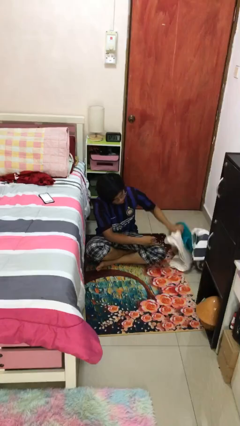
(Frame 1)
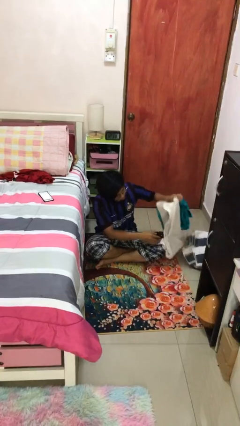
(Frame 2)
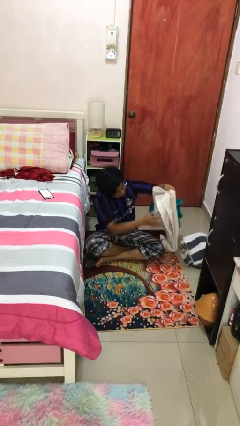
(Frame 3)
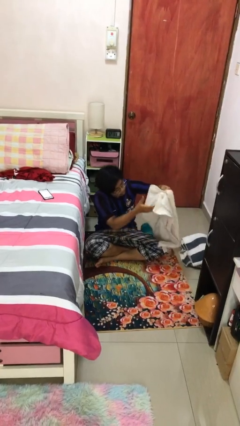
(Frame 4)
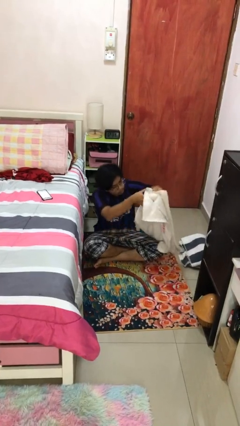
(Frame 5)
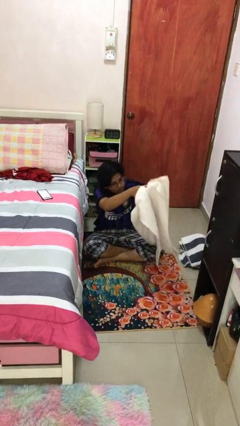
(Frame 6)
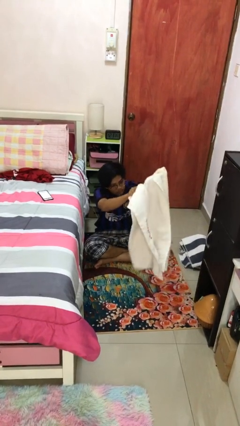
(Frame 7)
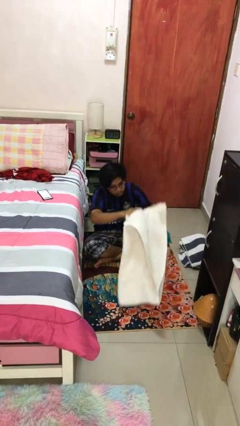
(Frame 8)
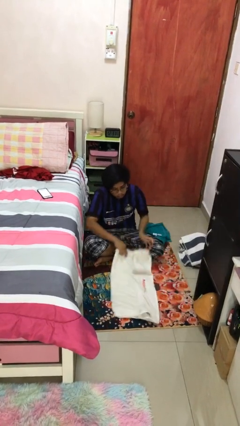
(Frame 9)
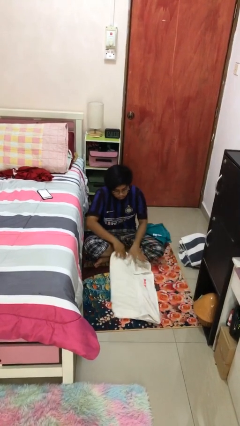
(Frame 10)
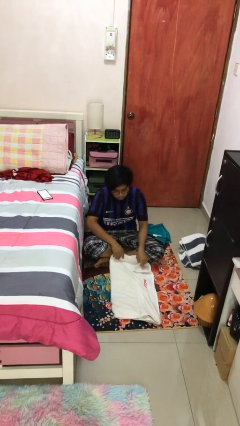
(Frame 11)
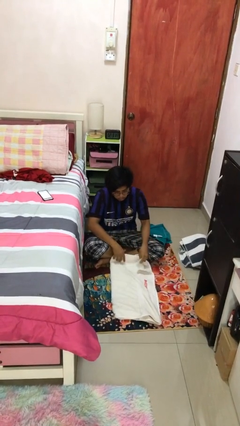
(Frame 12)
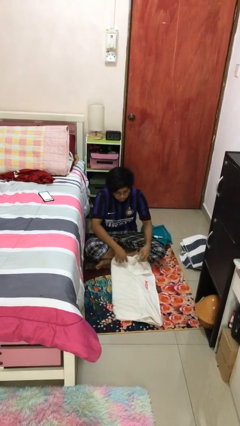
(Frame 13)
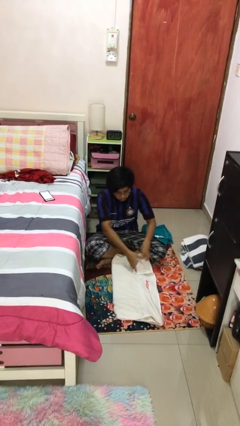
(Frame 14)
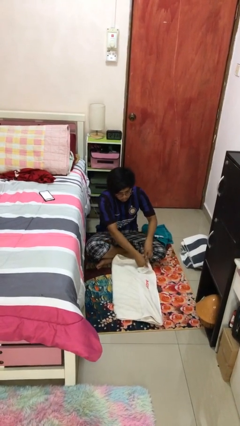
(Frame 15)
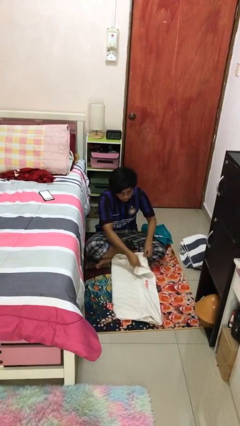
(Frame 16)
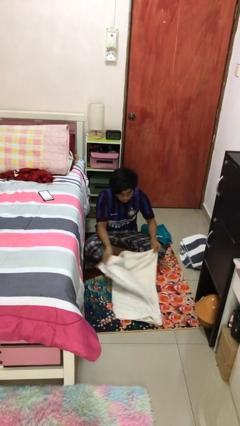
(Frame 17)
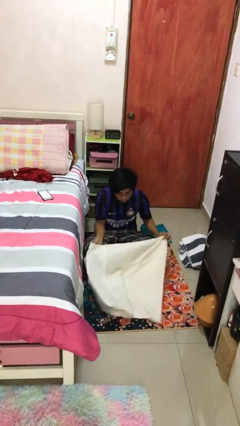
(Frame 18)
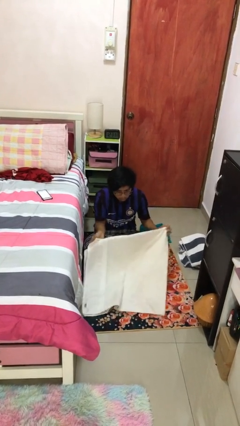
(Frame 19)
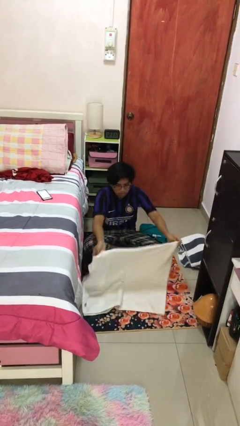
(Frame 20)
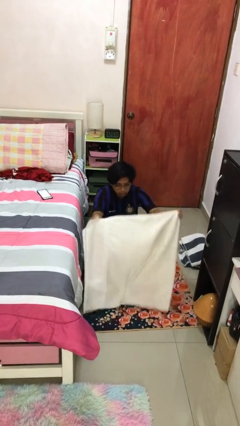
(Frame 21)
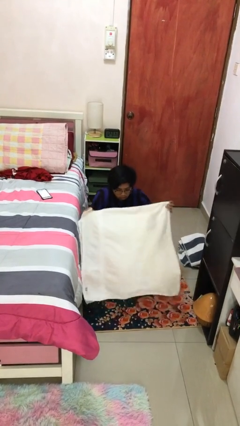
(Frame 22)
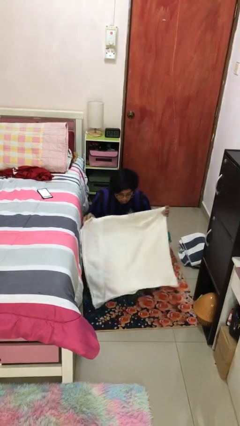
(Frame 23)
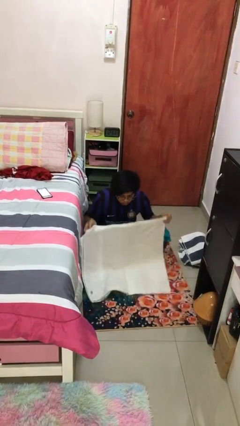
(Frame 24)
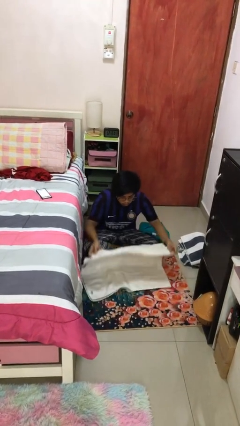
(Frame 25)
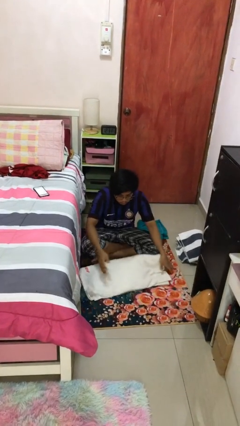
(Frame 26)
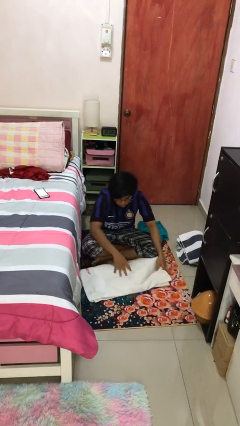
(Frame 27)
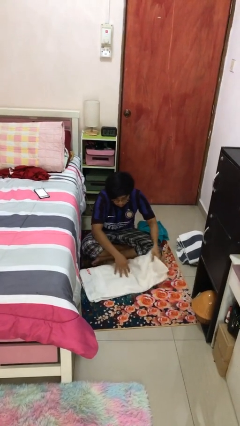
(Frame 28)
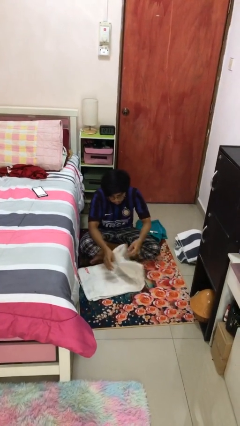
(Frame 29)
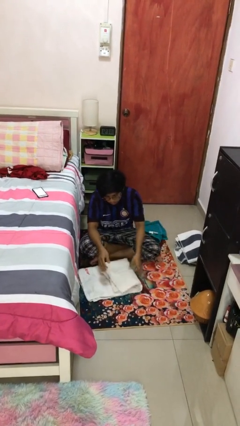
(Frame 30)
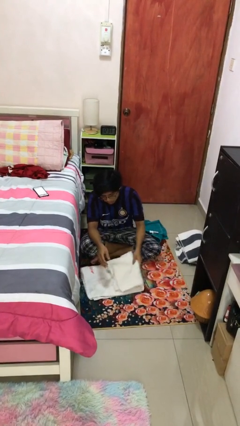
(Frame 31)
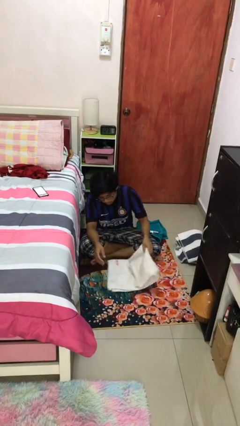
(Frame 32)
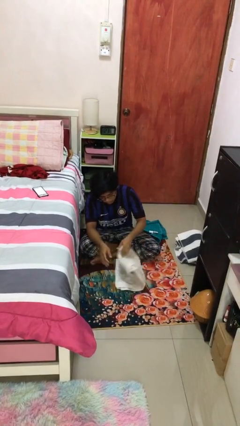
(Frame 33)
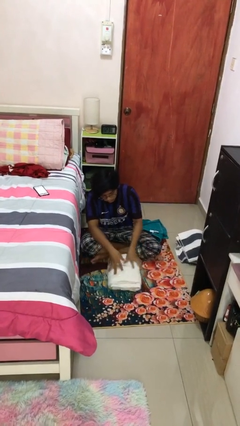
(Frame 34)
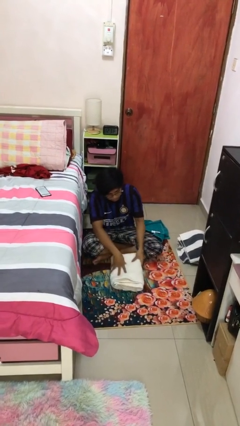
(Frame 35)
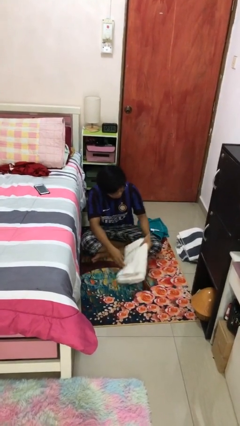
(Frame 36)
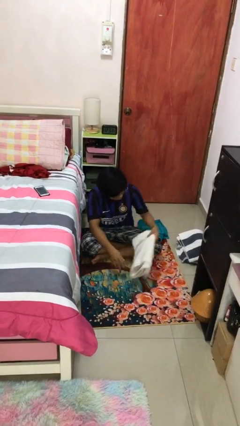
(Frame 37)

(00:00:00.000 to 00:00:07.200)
person folds towel

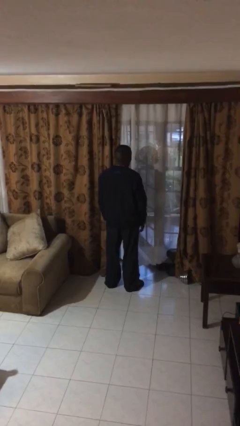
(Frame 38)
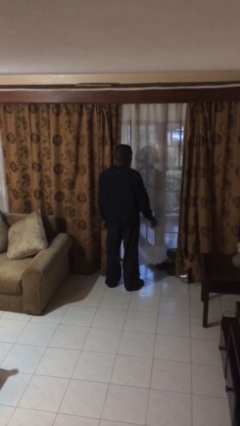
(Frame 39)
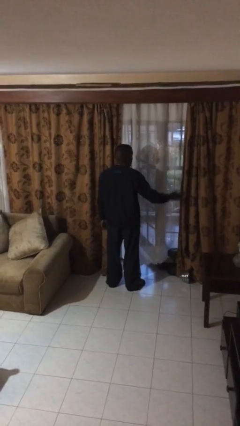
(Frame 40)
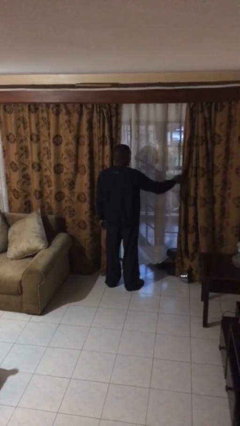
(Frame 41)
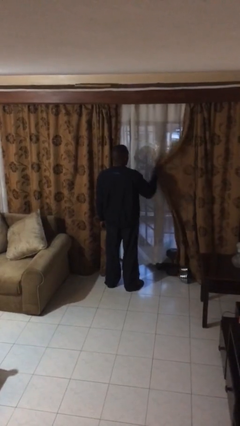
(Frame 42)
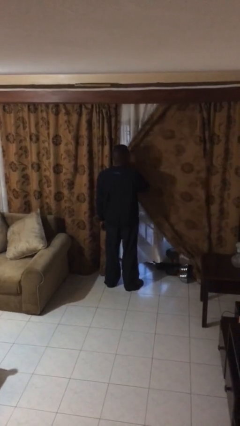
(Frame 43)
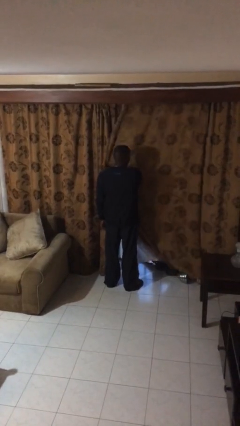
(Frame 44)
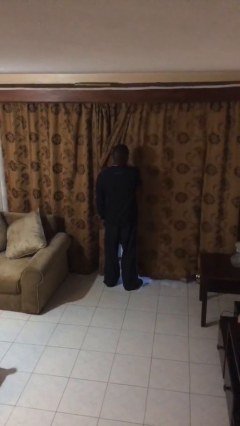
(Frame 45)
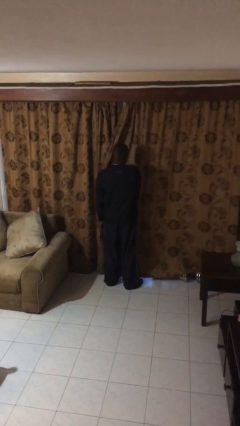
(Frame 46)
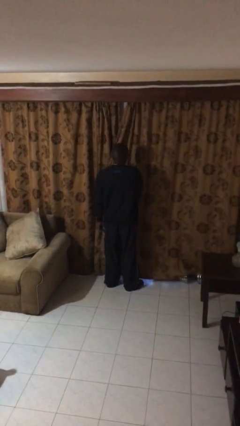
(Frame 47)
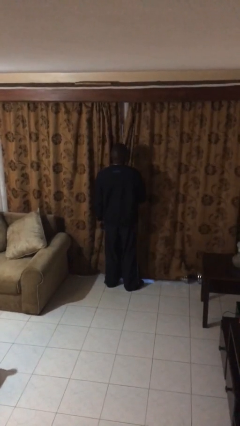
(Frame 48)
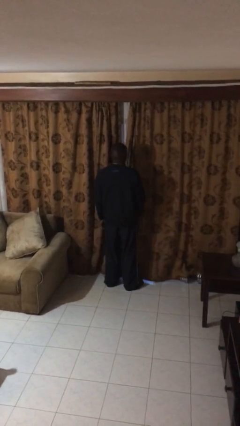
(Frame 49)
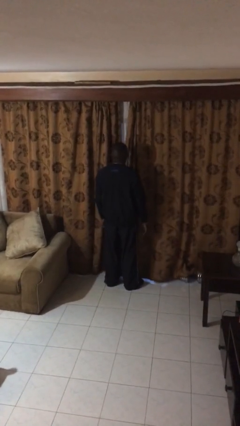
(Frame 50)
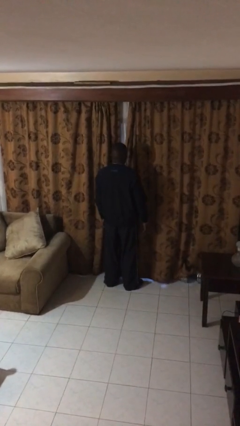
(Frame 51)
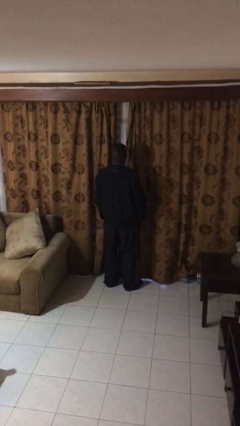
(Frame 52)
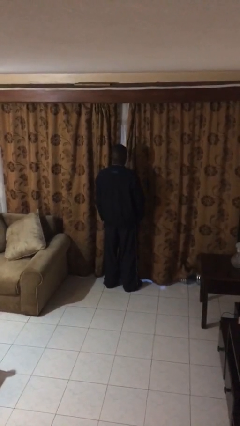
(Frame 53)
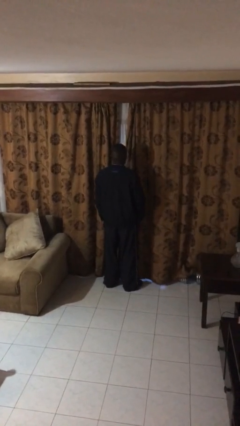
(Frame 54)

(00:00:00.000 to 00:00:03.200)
person closes curtains

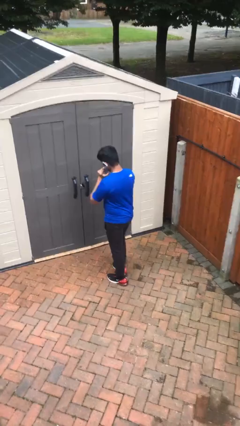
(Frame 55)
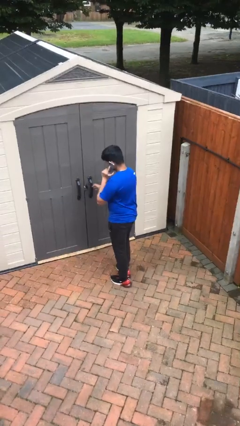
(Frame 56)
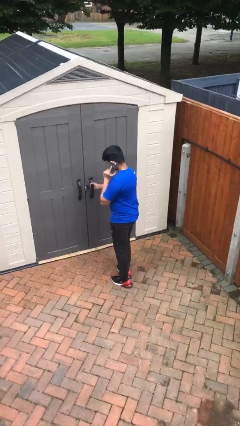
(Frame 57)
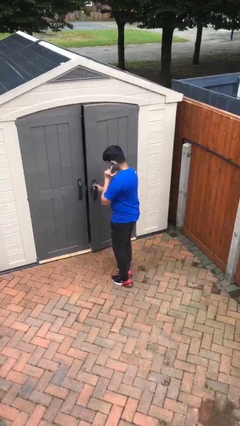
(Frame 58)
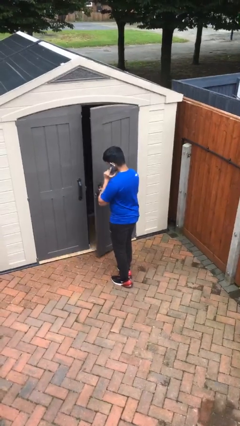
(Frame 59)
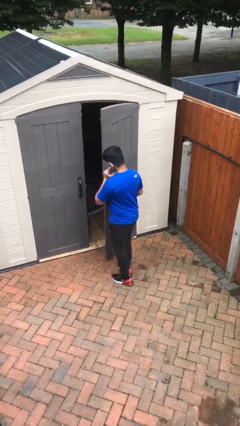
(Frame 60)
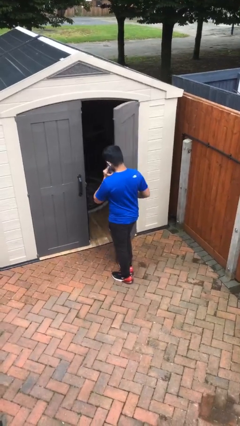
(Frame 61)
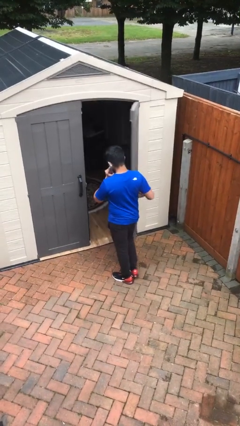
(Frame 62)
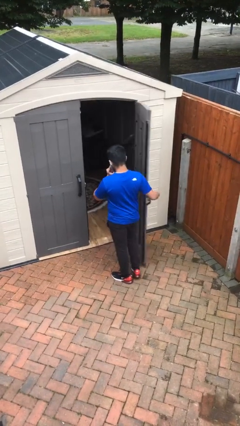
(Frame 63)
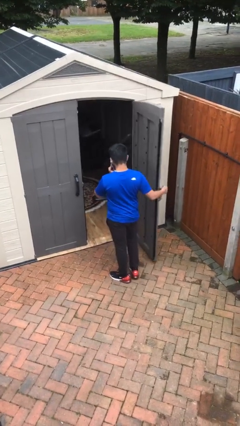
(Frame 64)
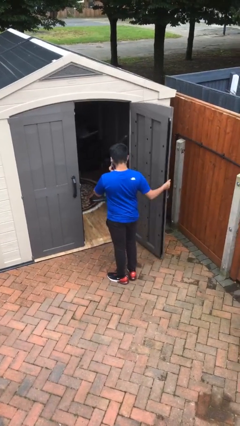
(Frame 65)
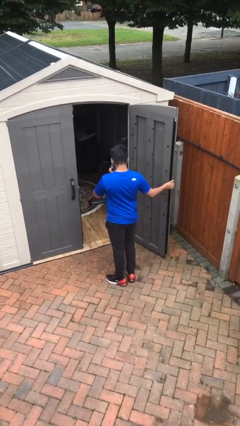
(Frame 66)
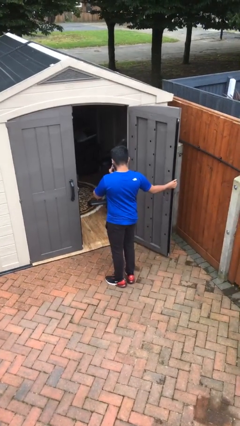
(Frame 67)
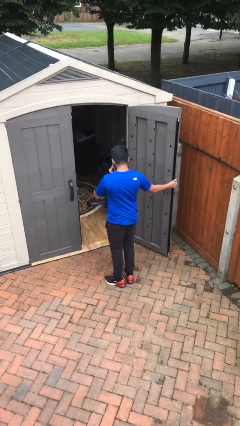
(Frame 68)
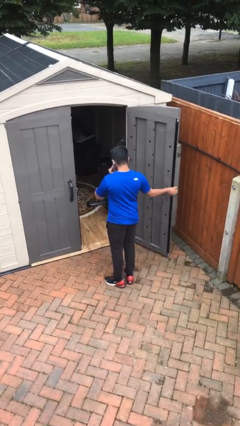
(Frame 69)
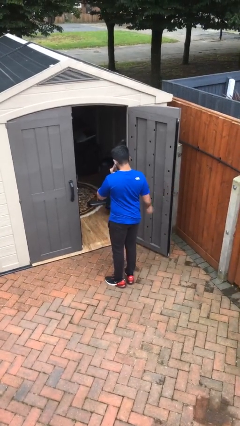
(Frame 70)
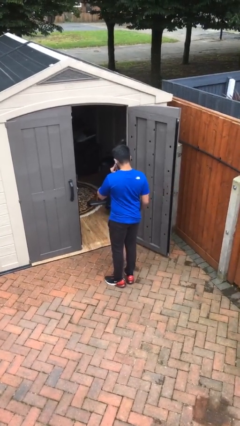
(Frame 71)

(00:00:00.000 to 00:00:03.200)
person opens facility door

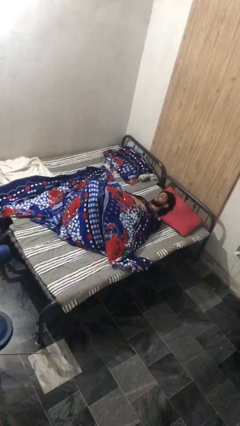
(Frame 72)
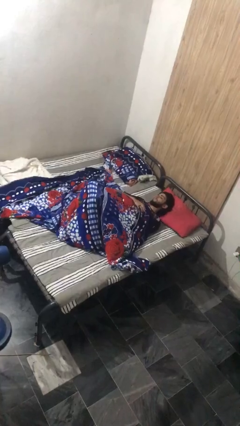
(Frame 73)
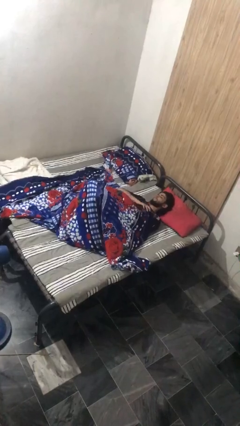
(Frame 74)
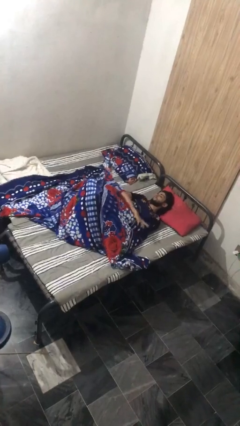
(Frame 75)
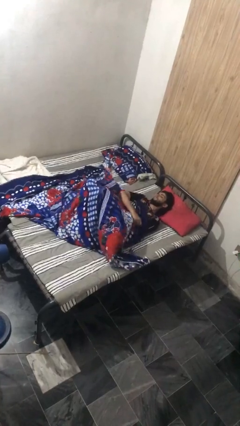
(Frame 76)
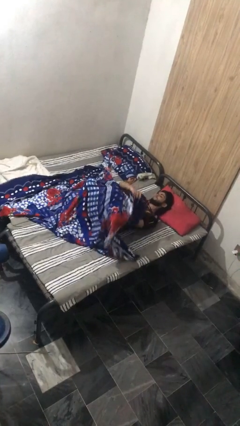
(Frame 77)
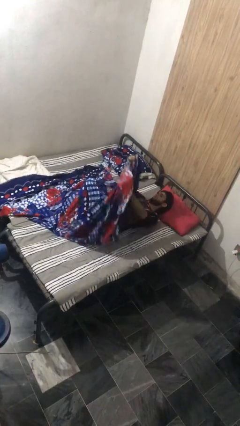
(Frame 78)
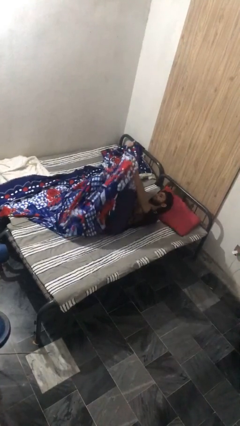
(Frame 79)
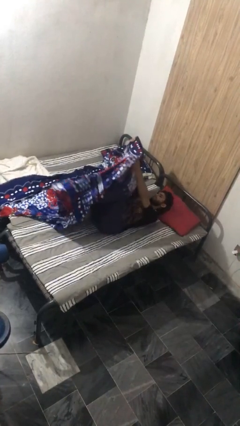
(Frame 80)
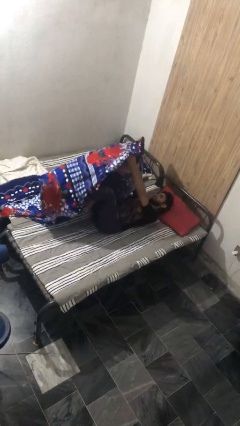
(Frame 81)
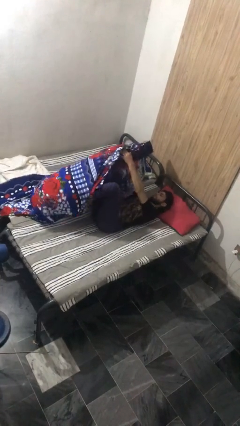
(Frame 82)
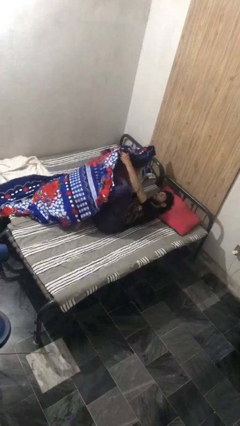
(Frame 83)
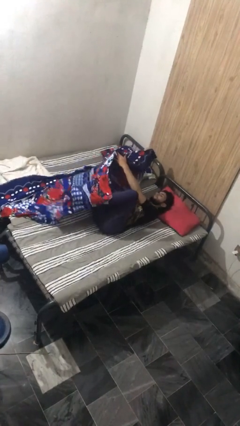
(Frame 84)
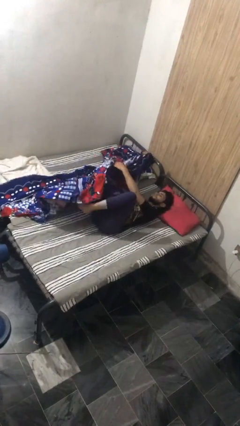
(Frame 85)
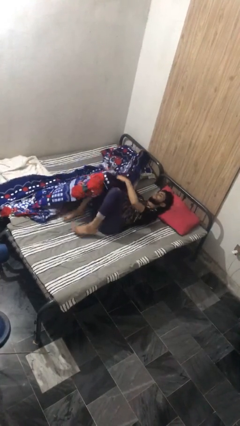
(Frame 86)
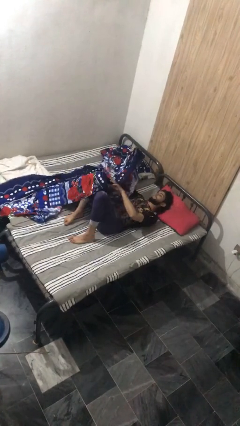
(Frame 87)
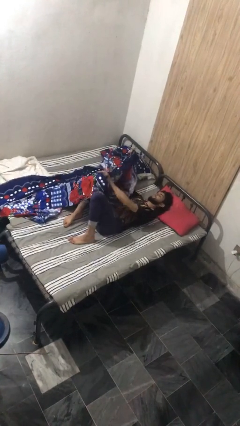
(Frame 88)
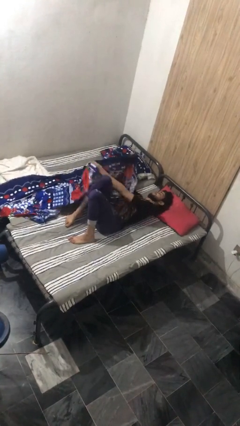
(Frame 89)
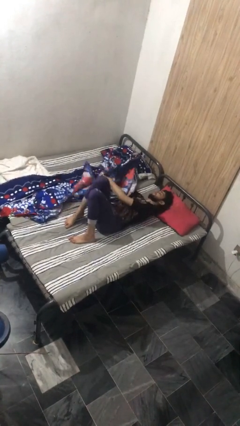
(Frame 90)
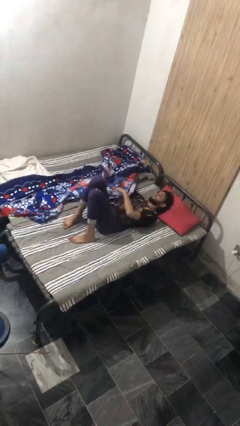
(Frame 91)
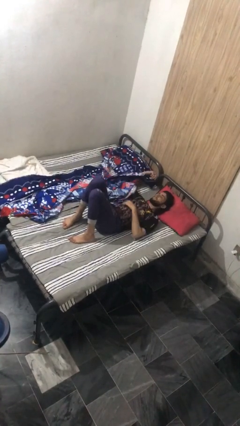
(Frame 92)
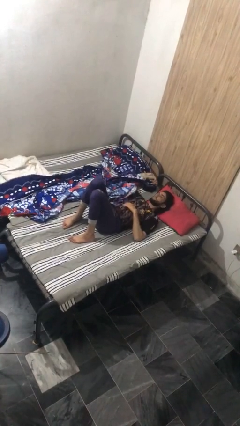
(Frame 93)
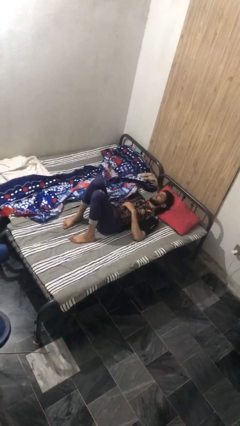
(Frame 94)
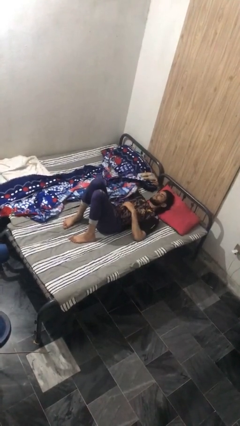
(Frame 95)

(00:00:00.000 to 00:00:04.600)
person uncovers with bedsheets
